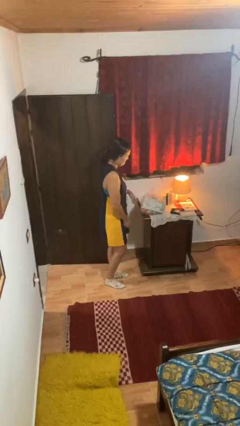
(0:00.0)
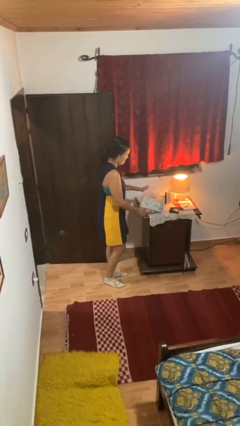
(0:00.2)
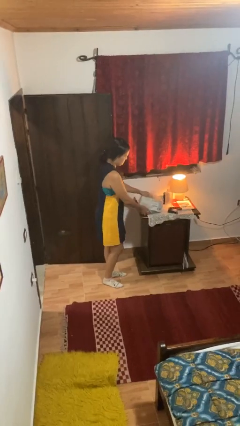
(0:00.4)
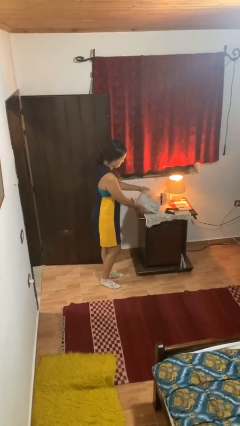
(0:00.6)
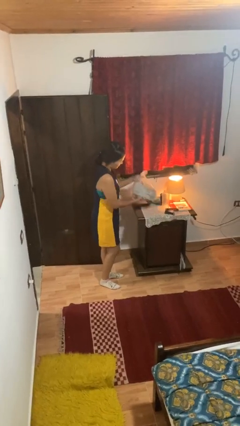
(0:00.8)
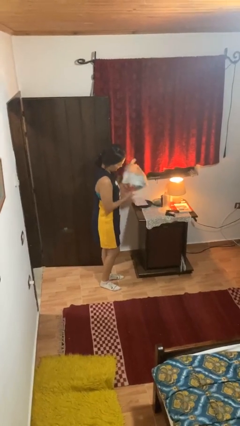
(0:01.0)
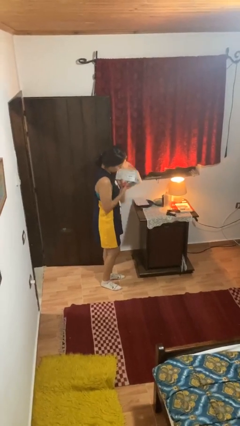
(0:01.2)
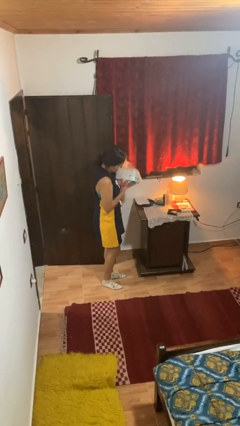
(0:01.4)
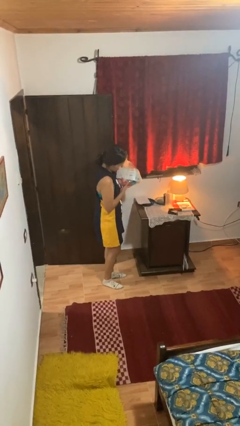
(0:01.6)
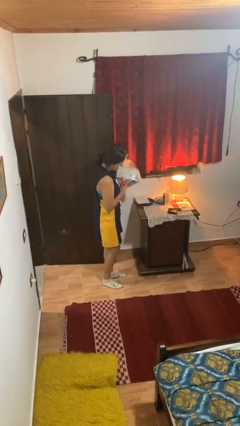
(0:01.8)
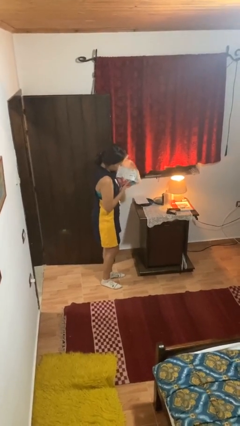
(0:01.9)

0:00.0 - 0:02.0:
person picks up object from countertop

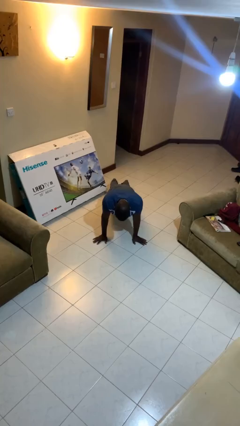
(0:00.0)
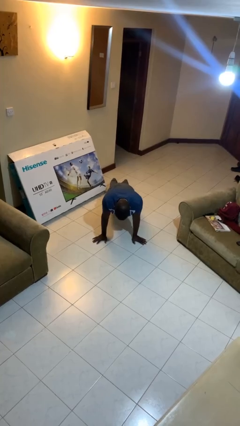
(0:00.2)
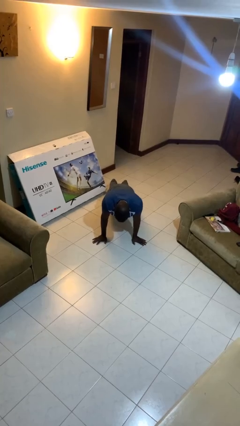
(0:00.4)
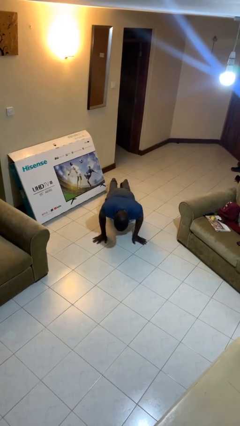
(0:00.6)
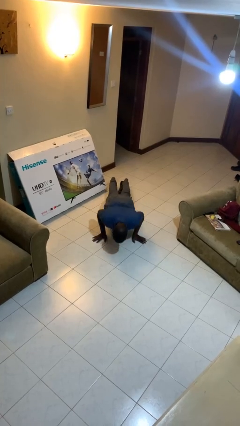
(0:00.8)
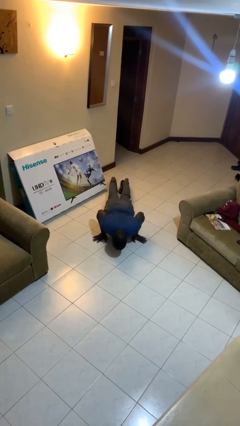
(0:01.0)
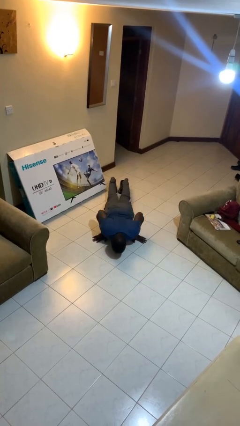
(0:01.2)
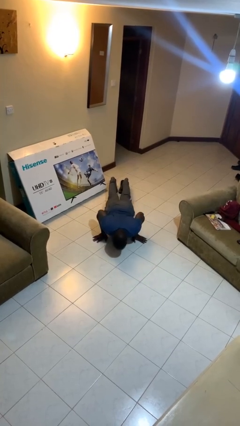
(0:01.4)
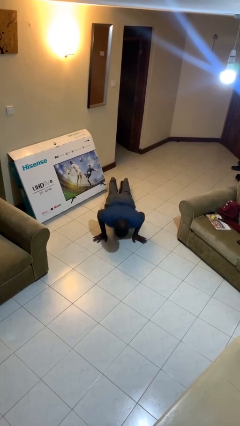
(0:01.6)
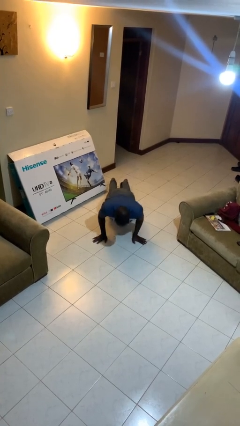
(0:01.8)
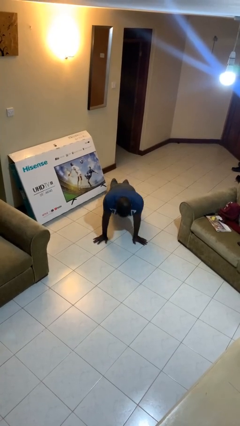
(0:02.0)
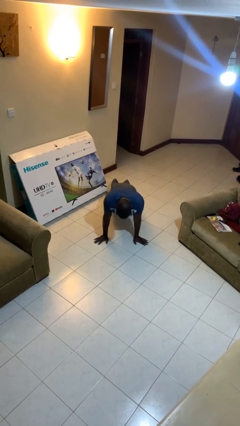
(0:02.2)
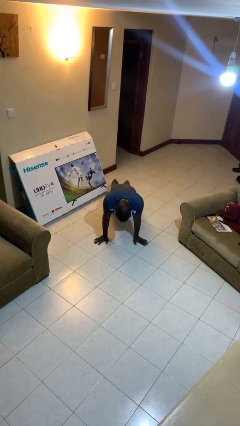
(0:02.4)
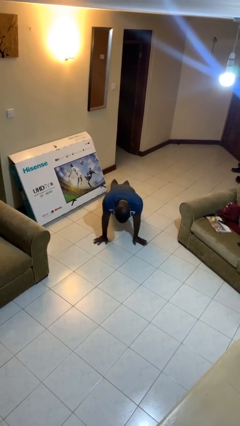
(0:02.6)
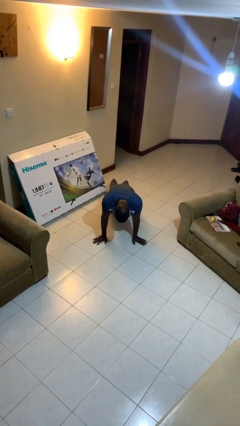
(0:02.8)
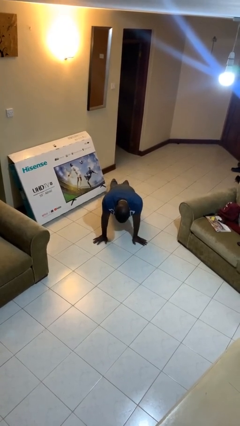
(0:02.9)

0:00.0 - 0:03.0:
person exercises with pushup

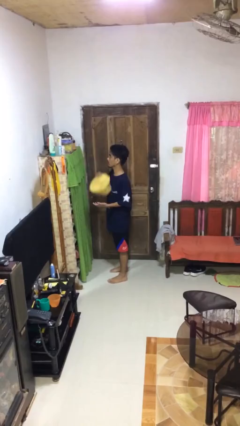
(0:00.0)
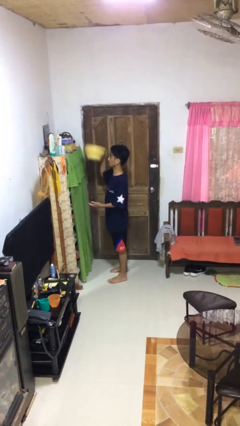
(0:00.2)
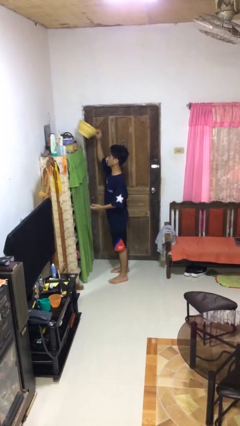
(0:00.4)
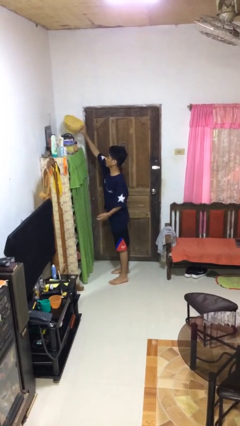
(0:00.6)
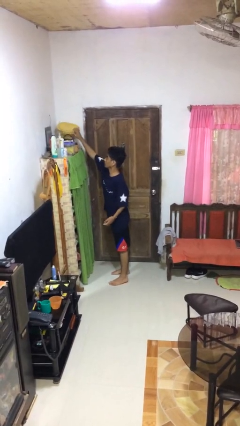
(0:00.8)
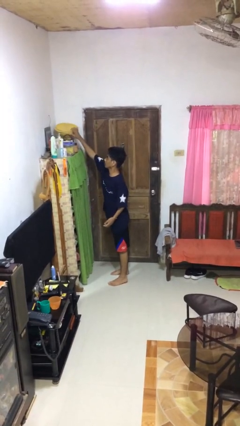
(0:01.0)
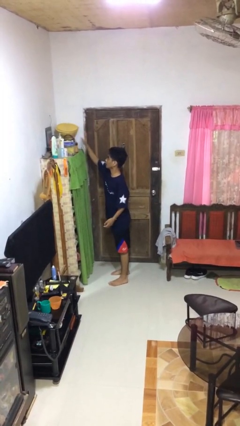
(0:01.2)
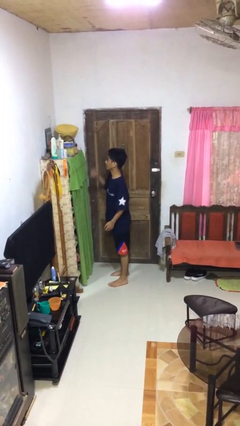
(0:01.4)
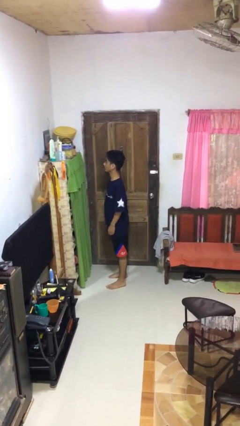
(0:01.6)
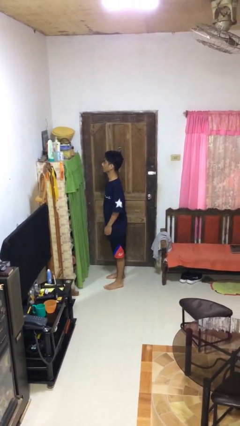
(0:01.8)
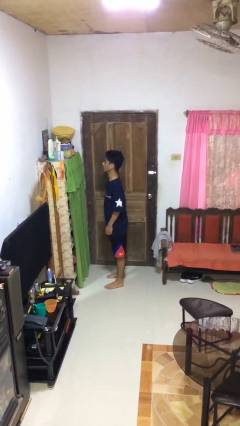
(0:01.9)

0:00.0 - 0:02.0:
person puts down object on shelf

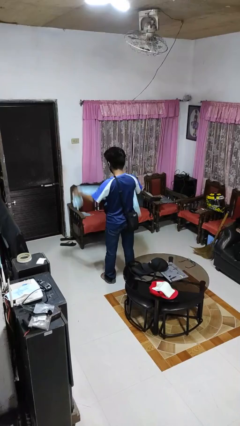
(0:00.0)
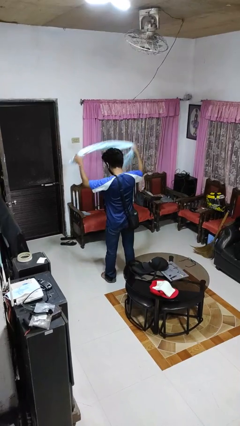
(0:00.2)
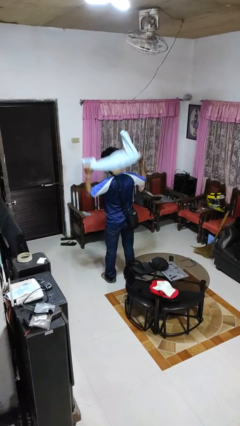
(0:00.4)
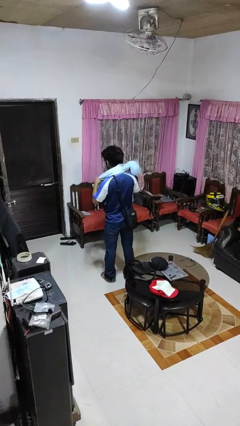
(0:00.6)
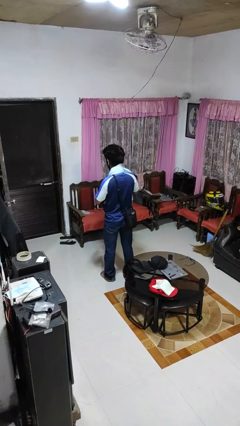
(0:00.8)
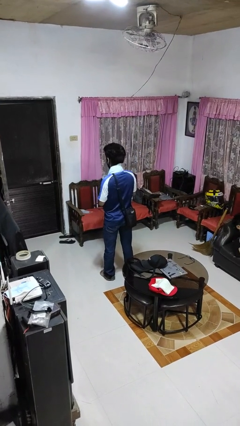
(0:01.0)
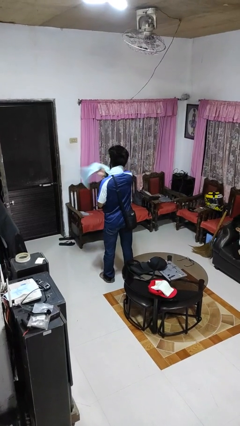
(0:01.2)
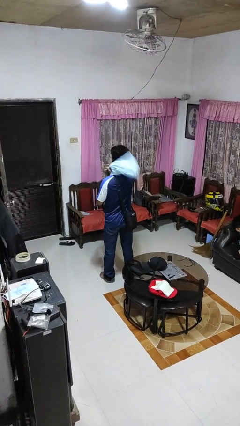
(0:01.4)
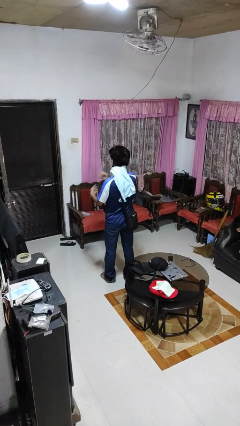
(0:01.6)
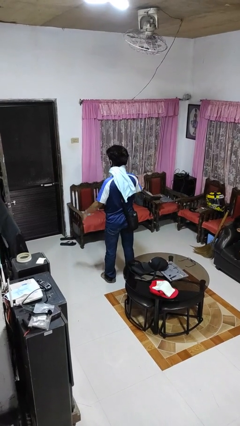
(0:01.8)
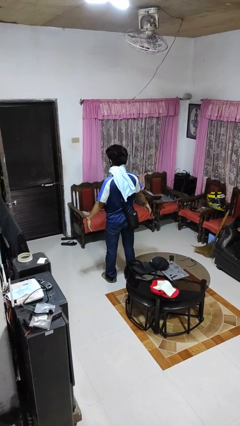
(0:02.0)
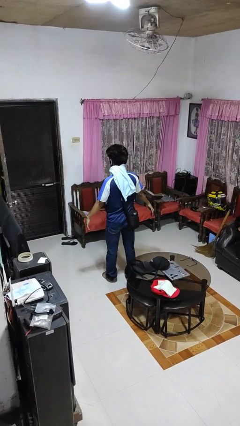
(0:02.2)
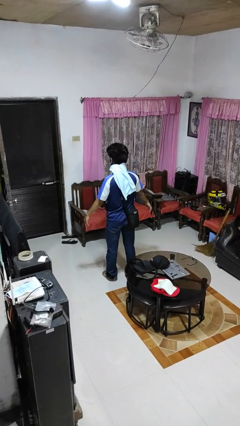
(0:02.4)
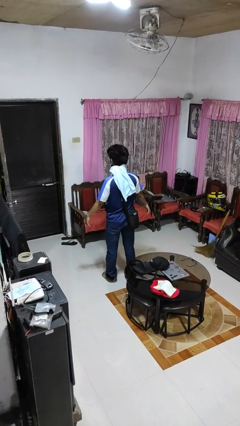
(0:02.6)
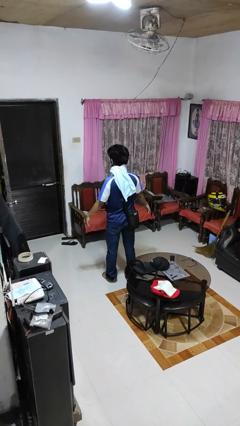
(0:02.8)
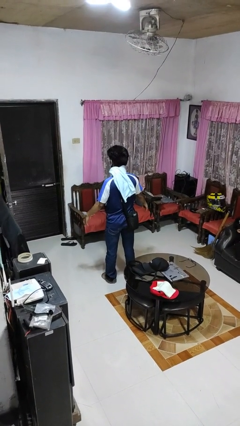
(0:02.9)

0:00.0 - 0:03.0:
person puts on scarf

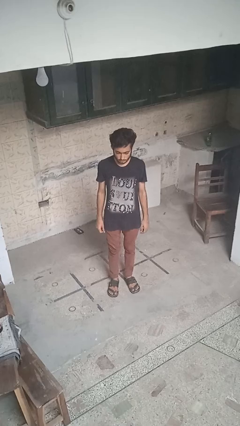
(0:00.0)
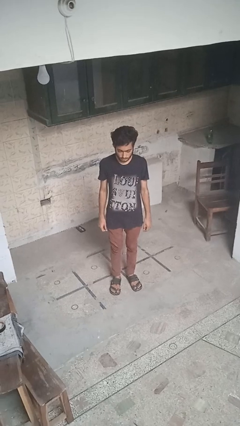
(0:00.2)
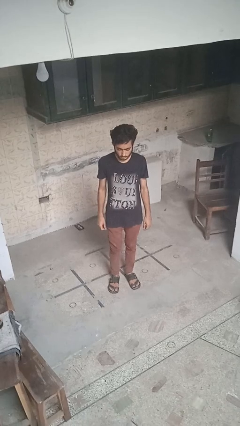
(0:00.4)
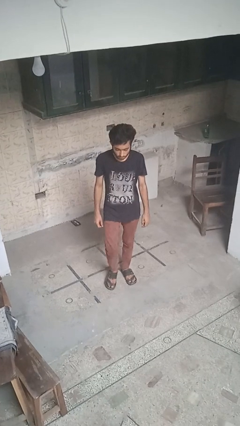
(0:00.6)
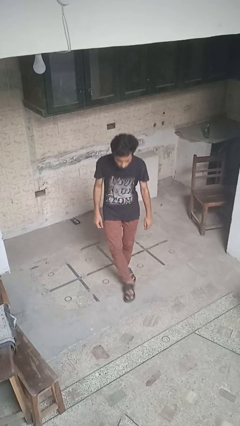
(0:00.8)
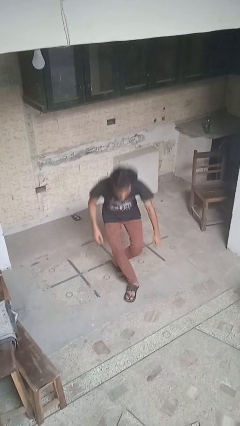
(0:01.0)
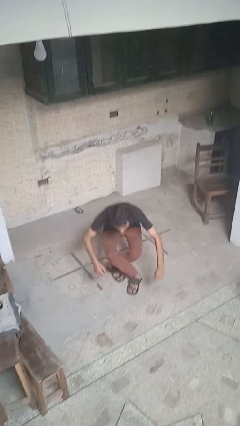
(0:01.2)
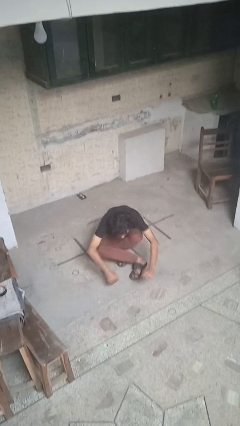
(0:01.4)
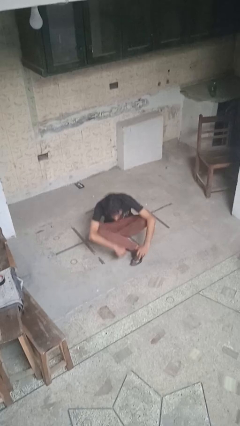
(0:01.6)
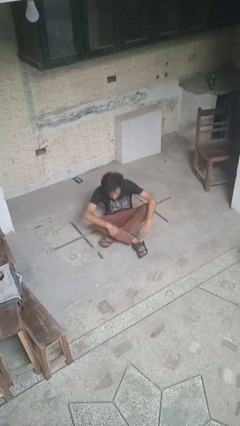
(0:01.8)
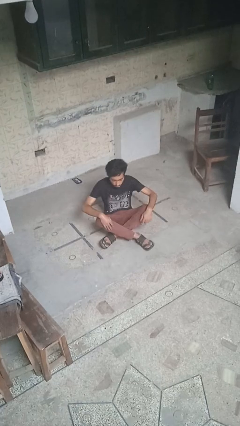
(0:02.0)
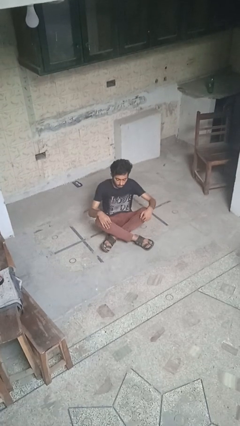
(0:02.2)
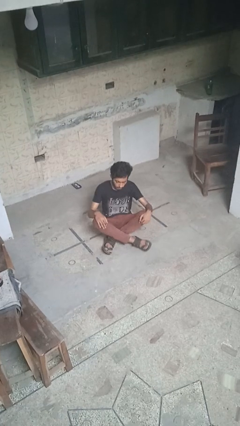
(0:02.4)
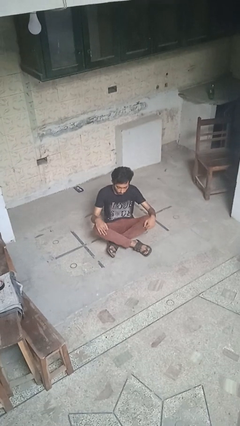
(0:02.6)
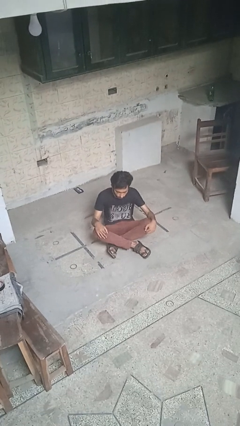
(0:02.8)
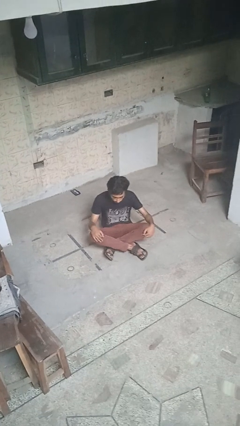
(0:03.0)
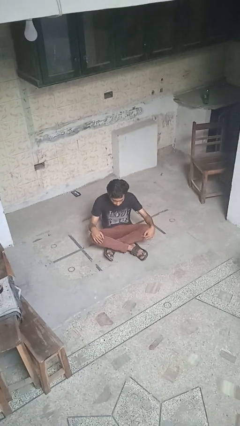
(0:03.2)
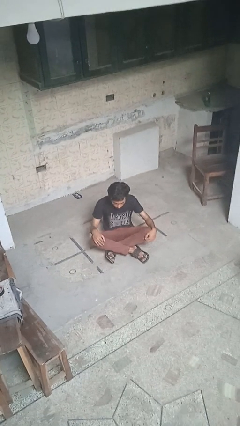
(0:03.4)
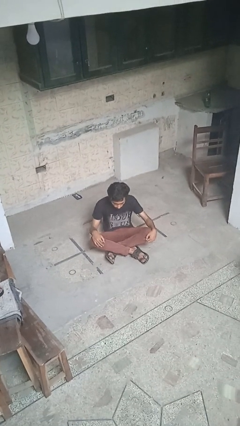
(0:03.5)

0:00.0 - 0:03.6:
person sits crisscross

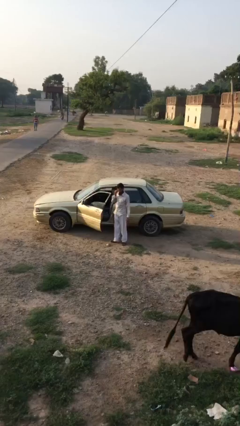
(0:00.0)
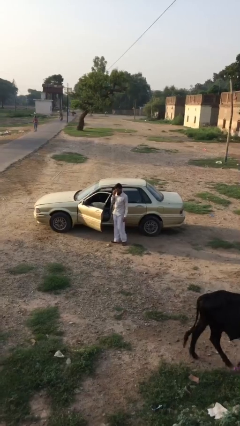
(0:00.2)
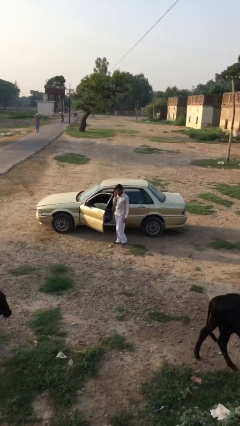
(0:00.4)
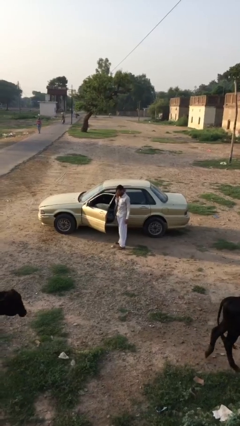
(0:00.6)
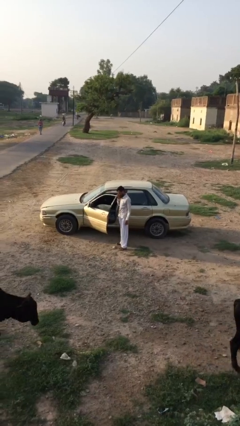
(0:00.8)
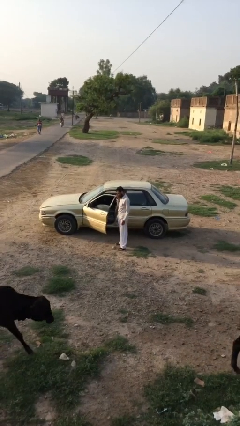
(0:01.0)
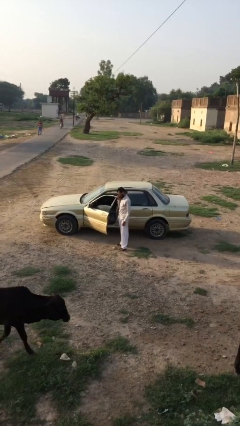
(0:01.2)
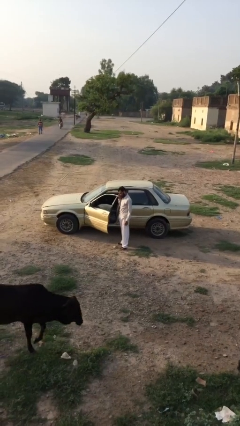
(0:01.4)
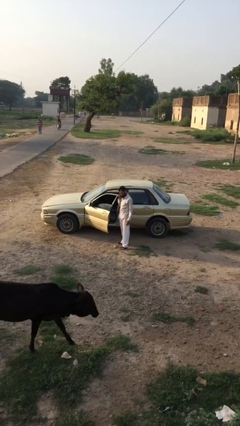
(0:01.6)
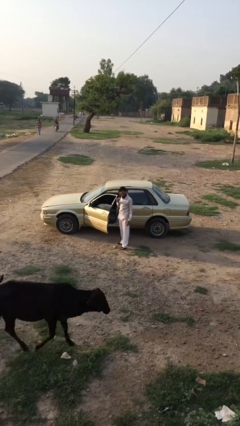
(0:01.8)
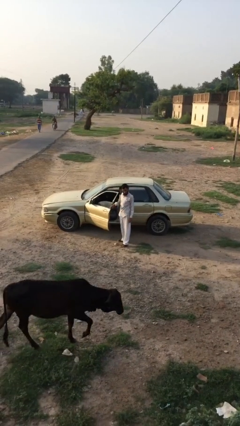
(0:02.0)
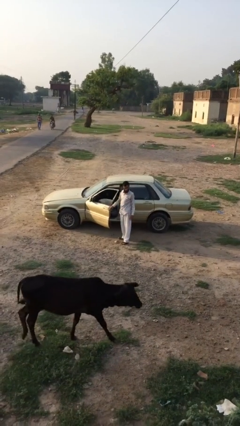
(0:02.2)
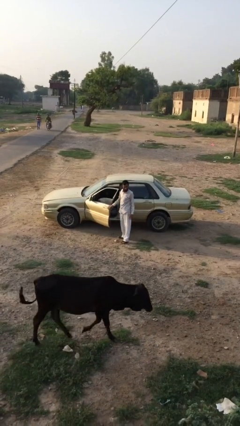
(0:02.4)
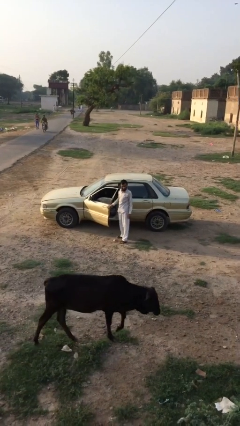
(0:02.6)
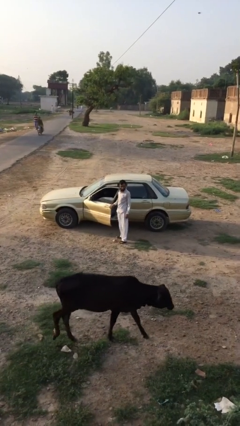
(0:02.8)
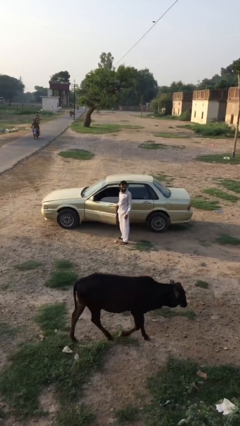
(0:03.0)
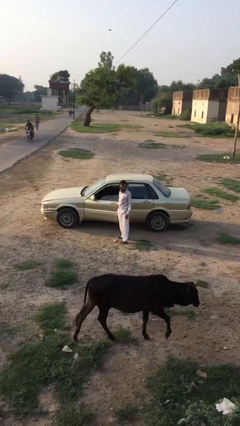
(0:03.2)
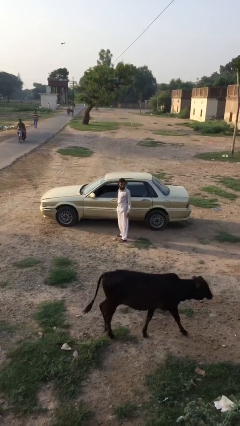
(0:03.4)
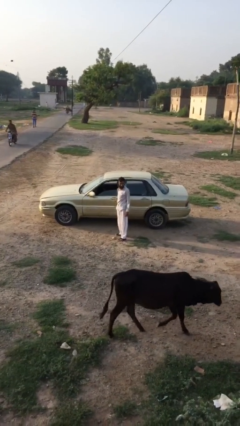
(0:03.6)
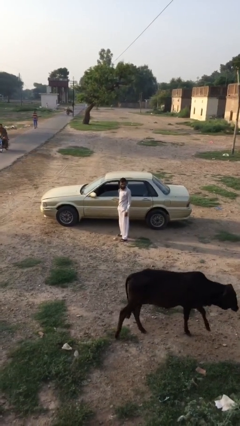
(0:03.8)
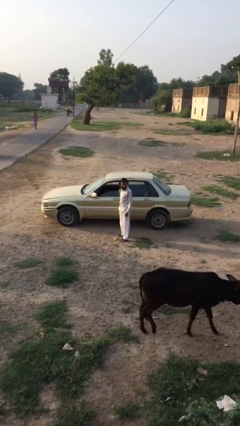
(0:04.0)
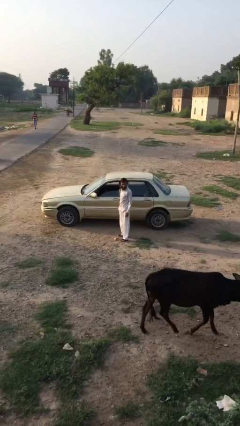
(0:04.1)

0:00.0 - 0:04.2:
person closes car door
